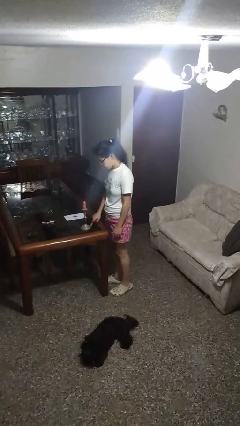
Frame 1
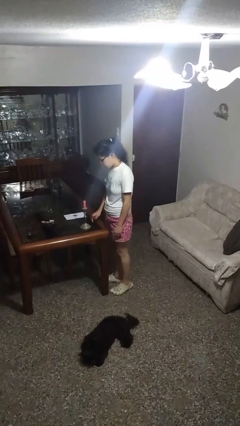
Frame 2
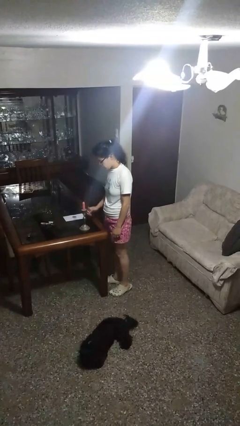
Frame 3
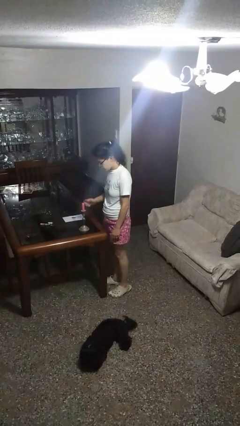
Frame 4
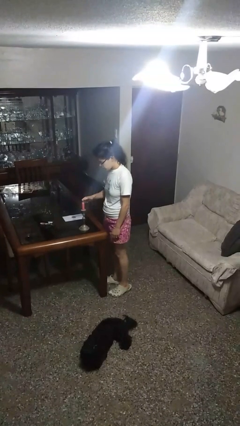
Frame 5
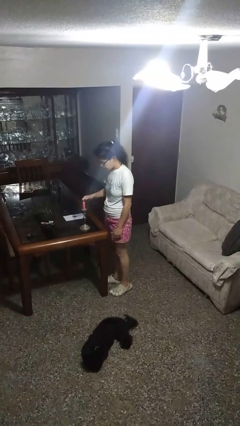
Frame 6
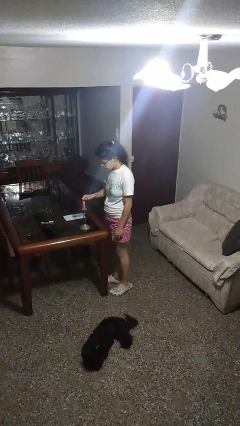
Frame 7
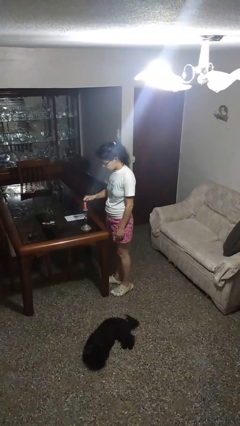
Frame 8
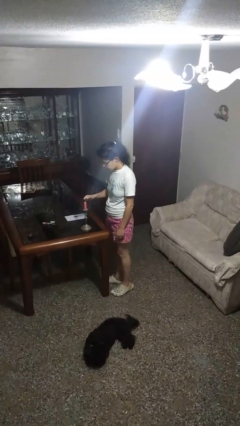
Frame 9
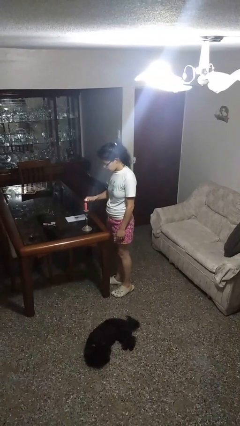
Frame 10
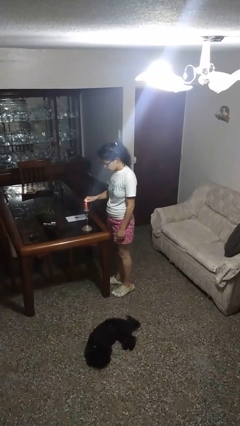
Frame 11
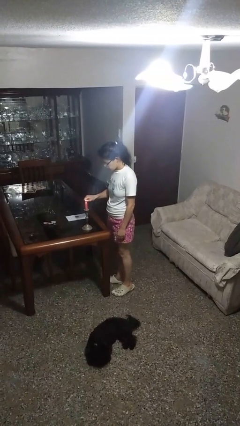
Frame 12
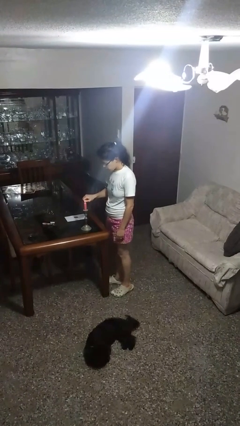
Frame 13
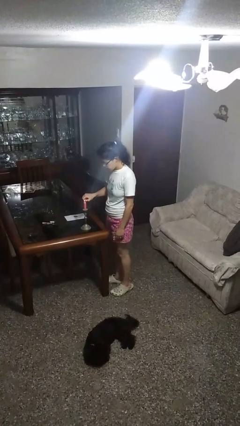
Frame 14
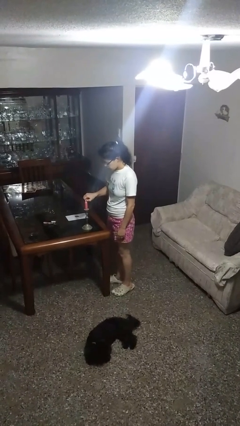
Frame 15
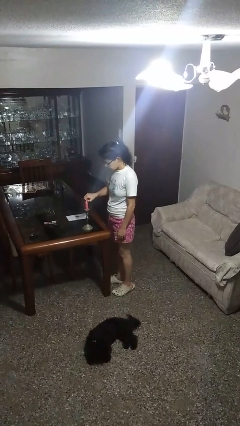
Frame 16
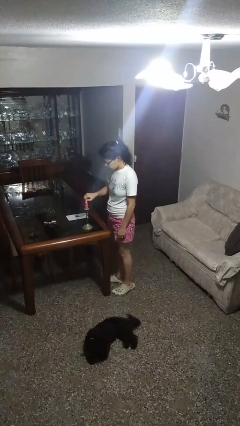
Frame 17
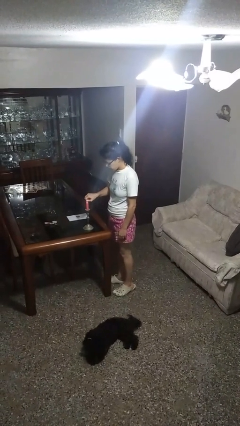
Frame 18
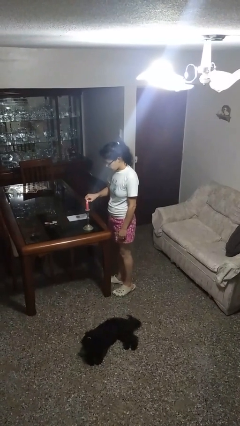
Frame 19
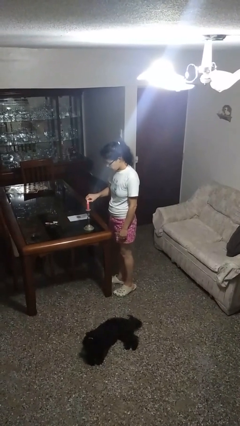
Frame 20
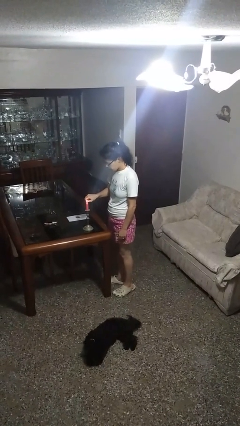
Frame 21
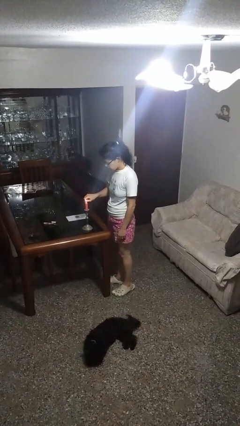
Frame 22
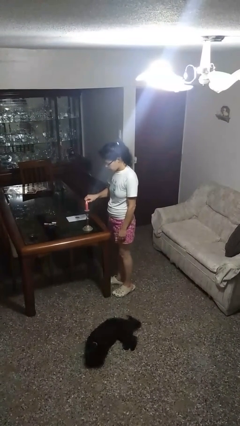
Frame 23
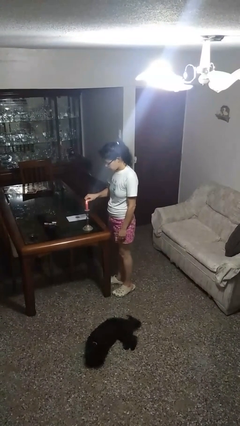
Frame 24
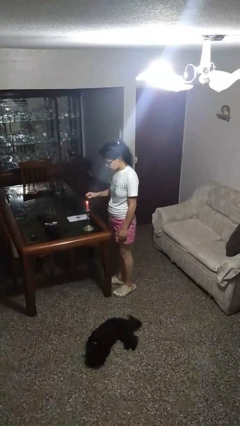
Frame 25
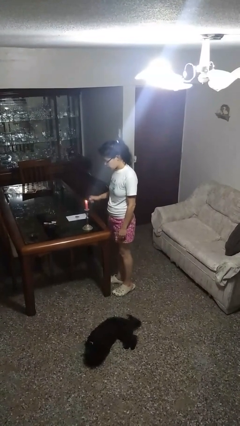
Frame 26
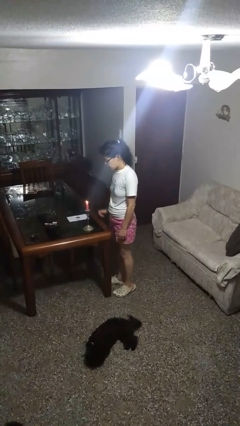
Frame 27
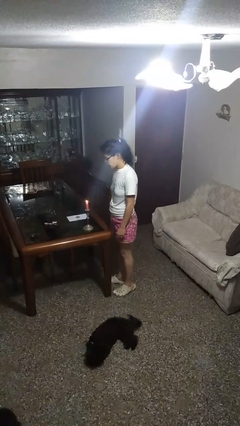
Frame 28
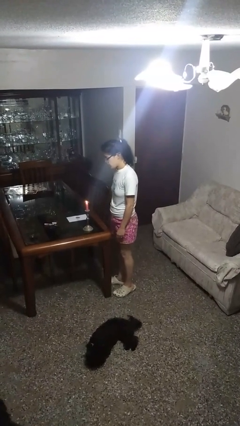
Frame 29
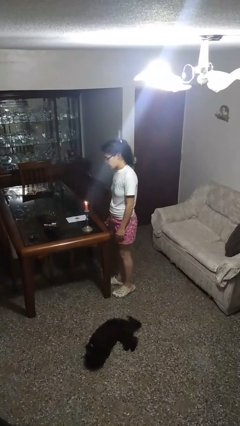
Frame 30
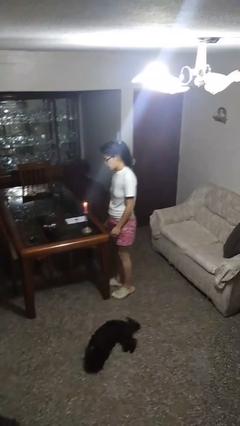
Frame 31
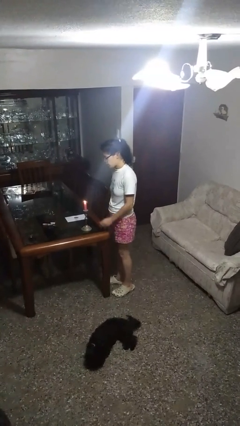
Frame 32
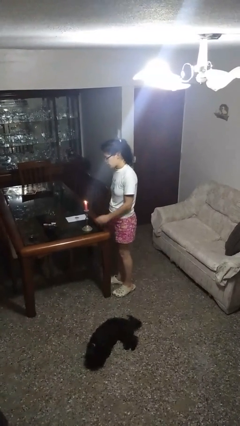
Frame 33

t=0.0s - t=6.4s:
person lights candle

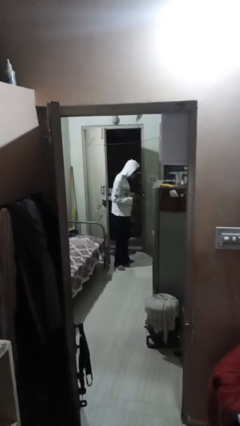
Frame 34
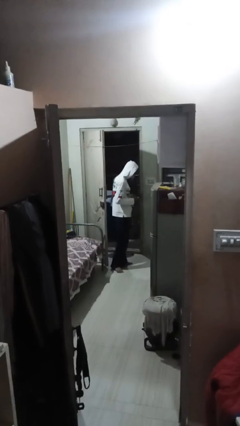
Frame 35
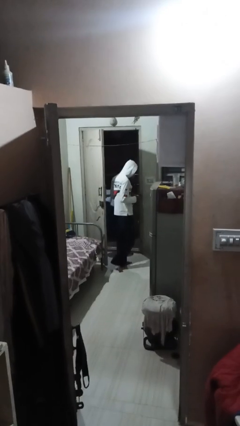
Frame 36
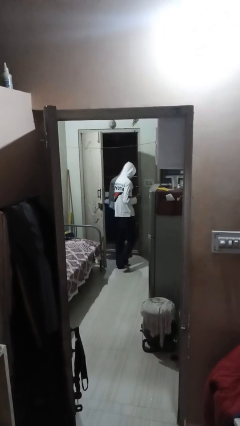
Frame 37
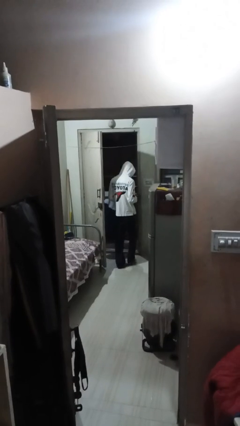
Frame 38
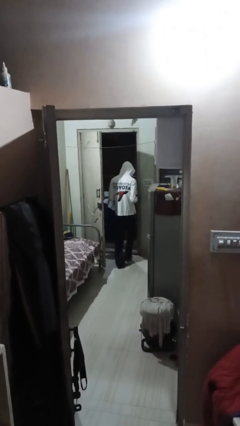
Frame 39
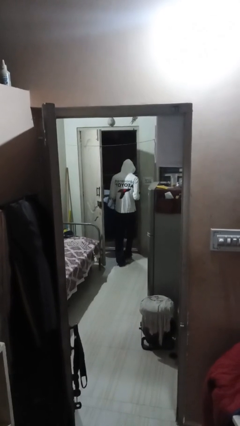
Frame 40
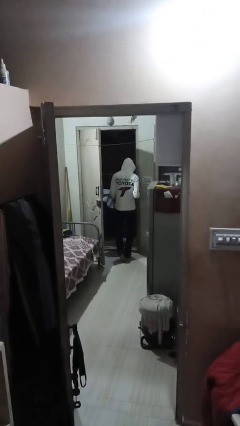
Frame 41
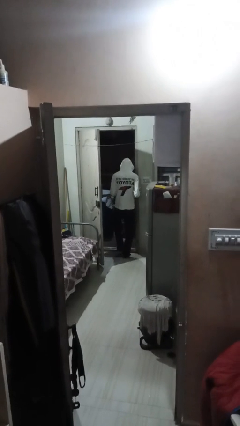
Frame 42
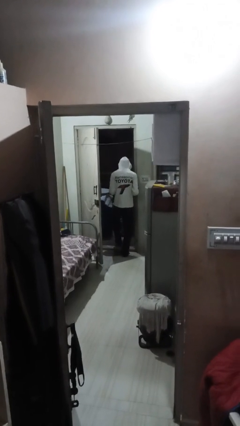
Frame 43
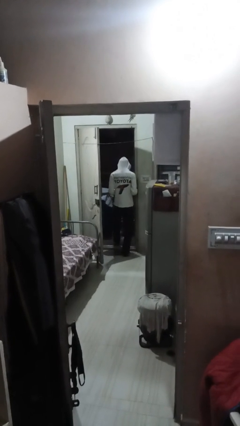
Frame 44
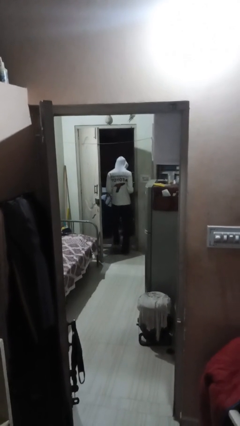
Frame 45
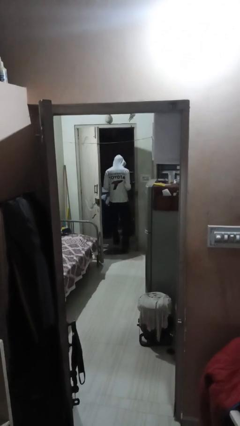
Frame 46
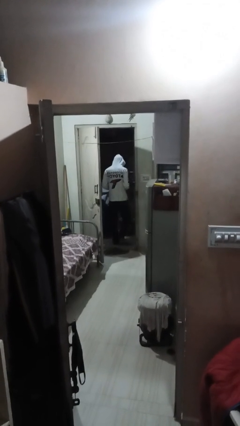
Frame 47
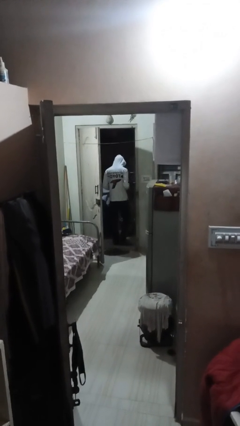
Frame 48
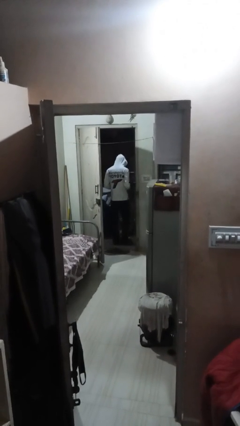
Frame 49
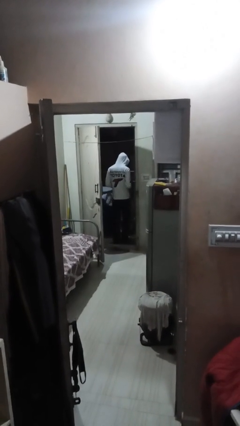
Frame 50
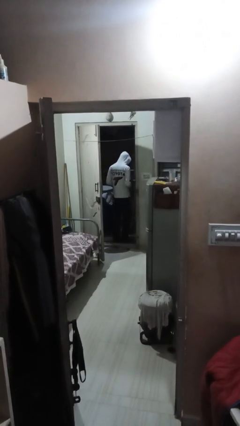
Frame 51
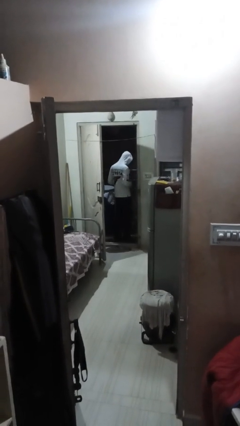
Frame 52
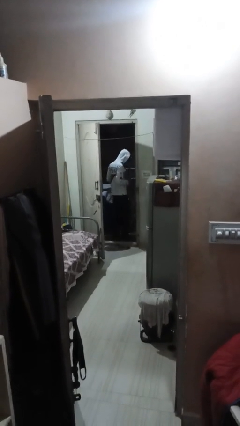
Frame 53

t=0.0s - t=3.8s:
person exits scene through structure

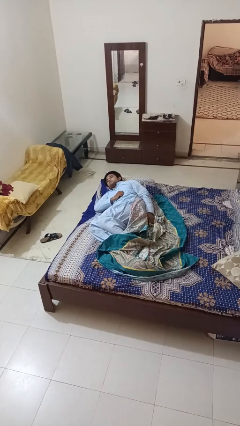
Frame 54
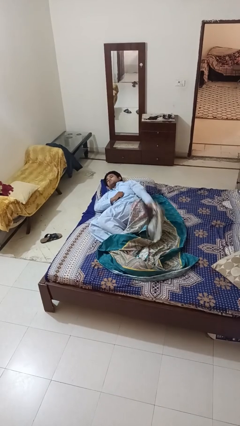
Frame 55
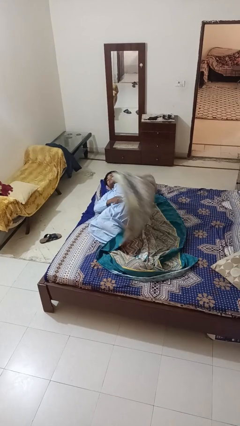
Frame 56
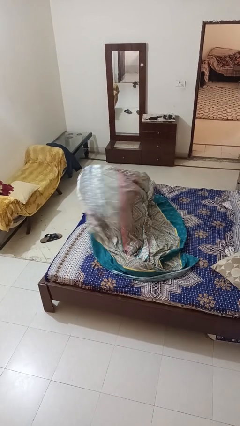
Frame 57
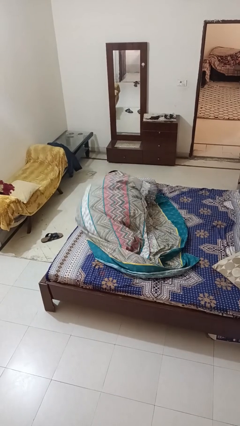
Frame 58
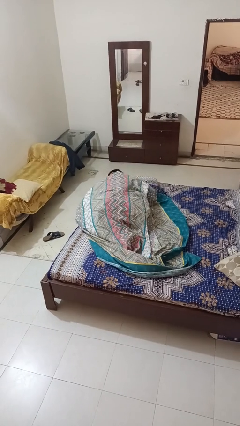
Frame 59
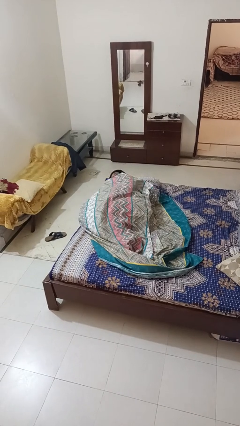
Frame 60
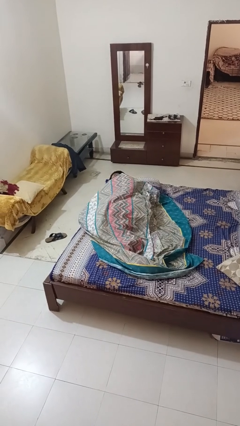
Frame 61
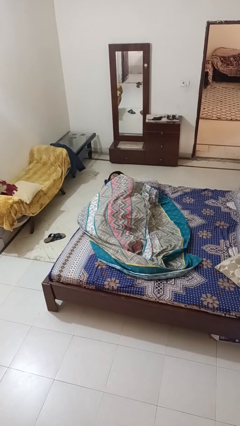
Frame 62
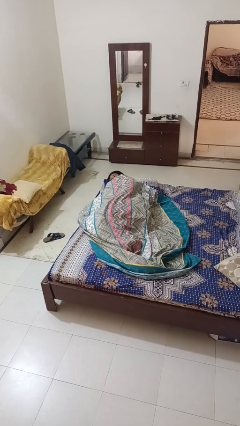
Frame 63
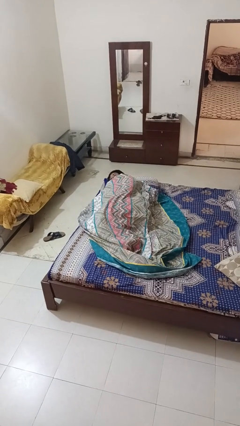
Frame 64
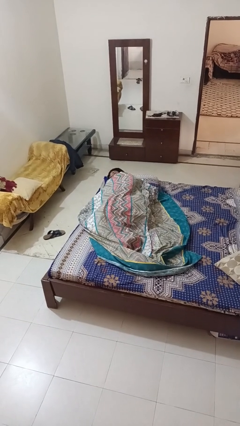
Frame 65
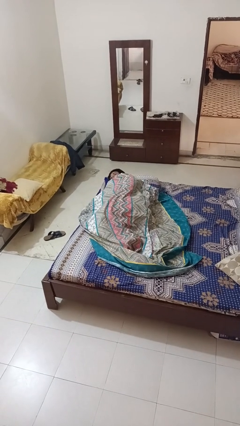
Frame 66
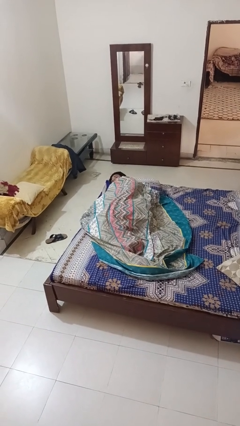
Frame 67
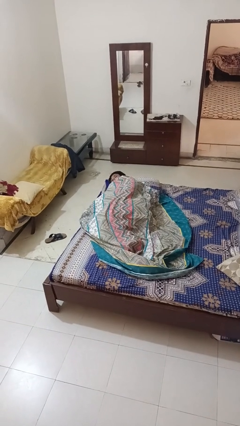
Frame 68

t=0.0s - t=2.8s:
person covers with bedsheets

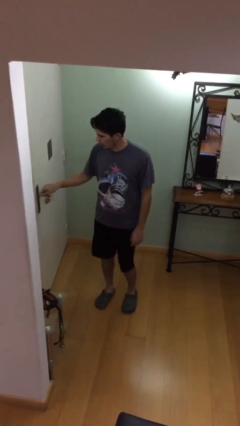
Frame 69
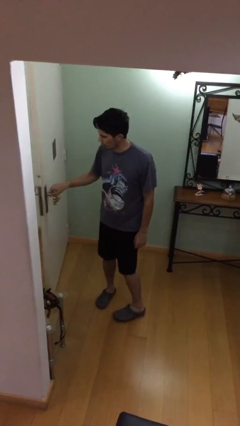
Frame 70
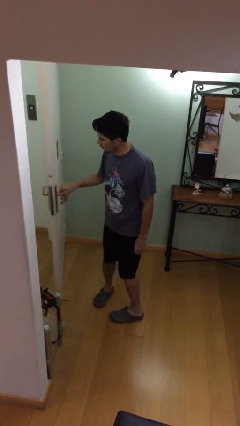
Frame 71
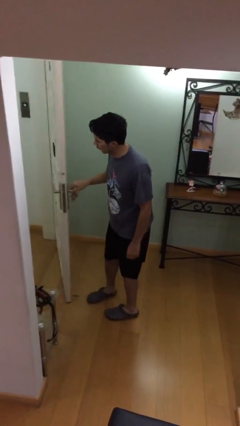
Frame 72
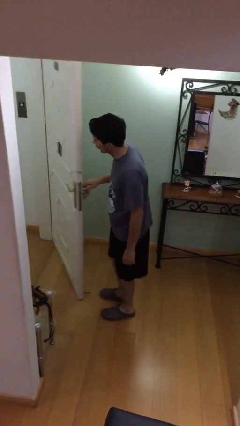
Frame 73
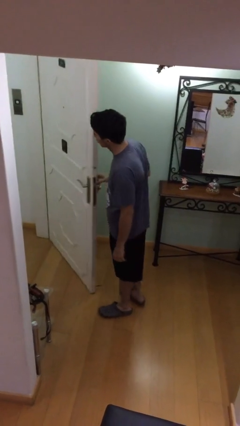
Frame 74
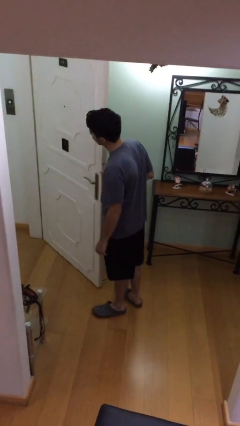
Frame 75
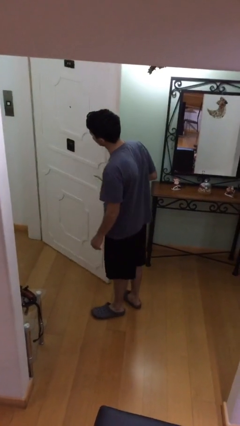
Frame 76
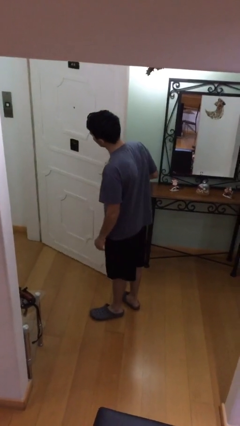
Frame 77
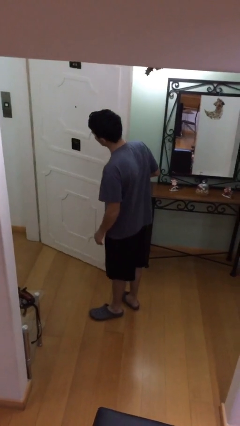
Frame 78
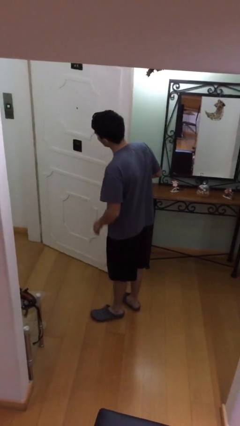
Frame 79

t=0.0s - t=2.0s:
person opens facility door

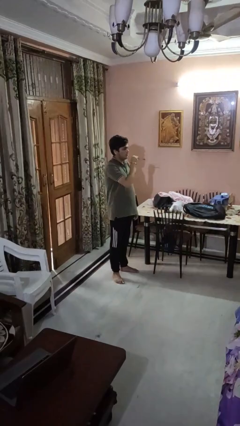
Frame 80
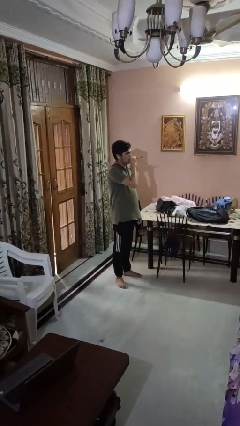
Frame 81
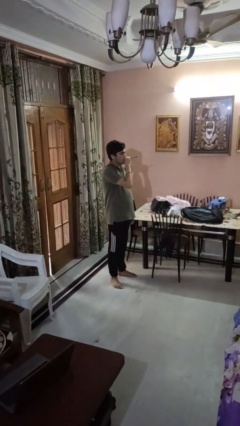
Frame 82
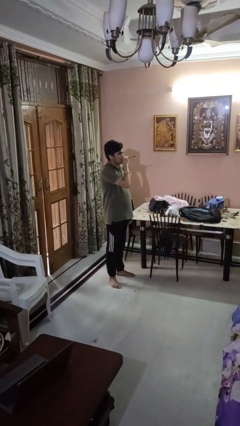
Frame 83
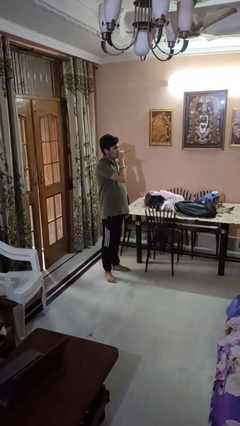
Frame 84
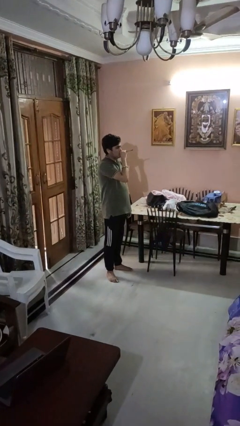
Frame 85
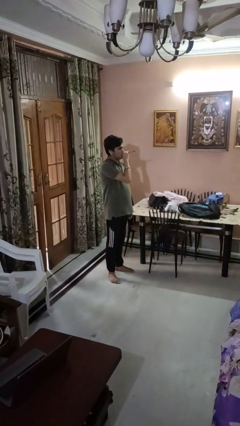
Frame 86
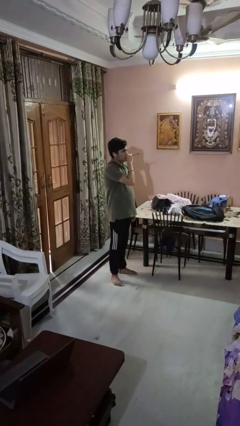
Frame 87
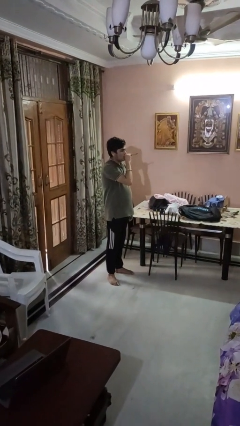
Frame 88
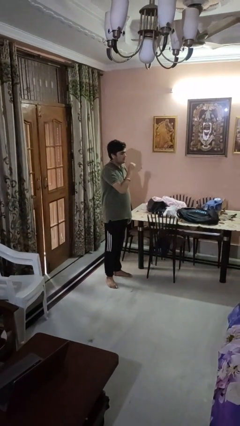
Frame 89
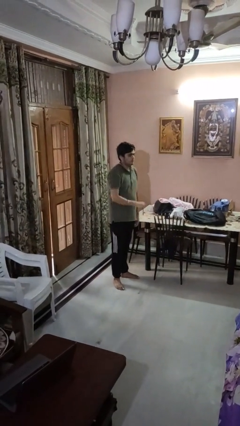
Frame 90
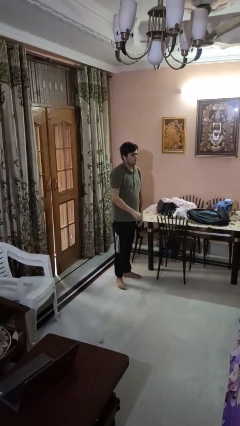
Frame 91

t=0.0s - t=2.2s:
person vapes
